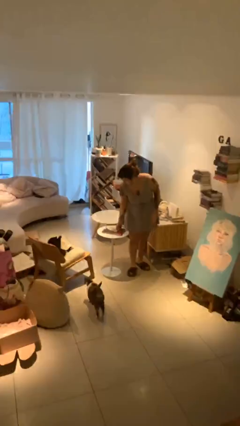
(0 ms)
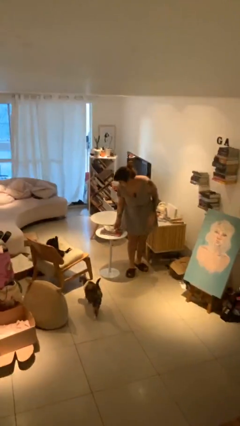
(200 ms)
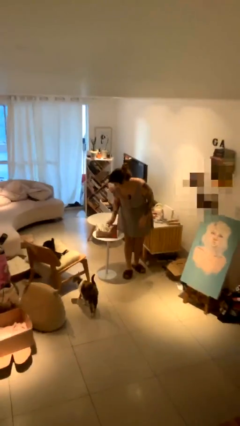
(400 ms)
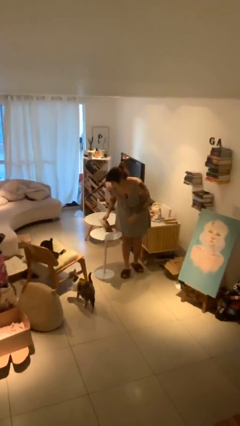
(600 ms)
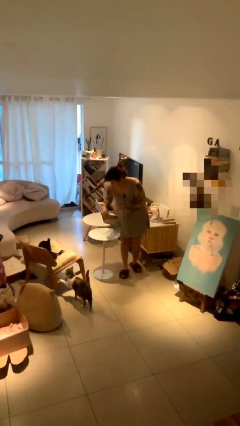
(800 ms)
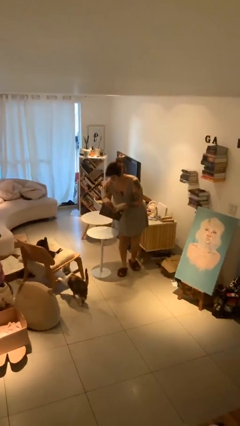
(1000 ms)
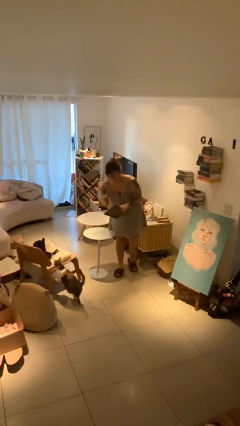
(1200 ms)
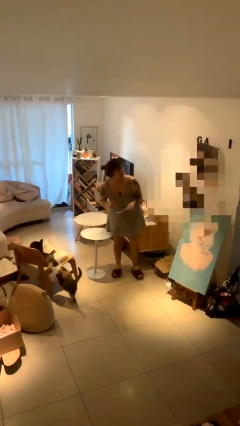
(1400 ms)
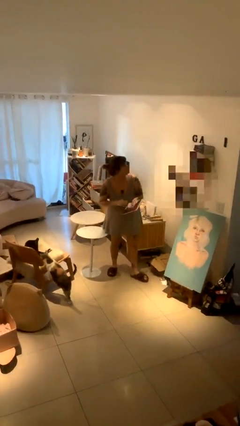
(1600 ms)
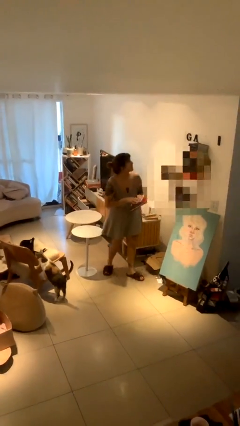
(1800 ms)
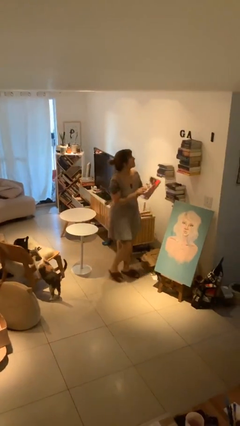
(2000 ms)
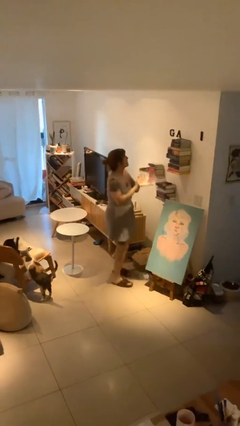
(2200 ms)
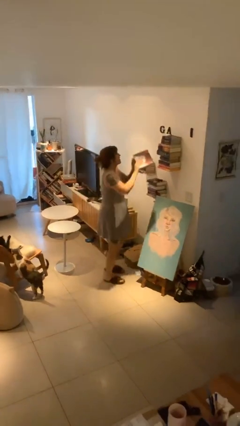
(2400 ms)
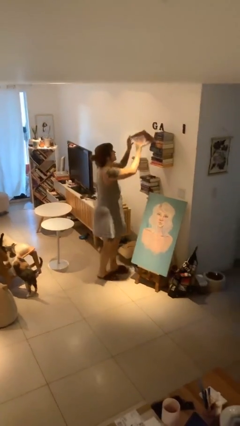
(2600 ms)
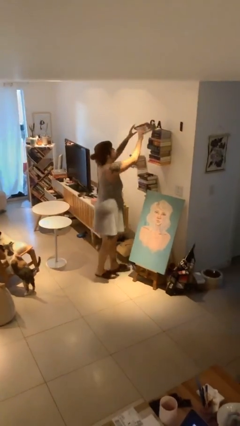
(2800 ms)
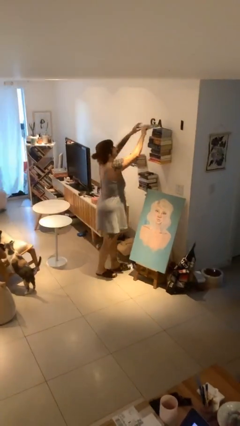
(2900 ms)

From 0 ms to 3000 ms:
person picks up object from table

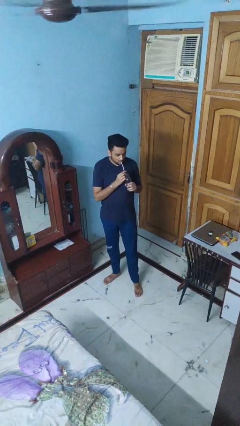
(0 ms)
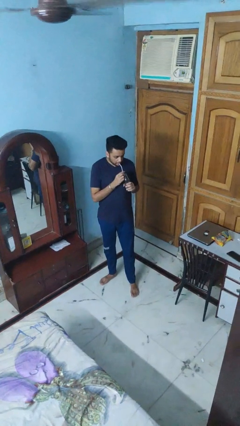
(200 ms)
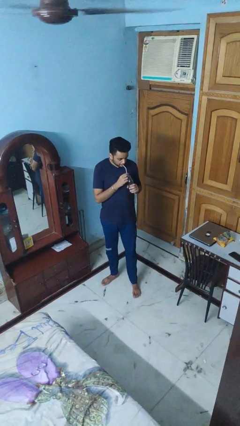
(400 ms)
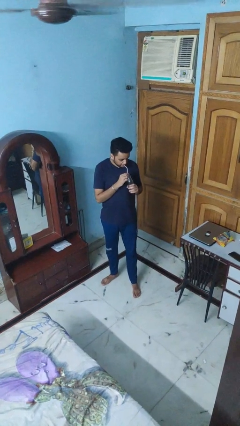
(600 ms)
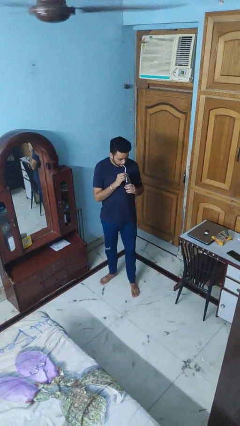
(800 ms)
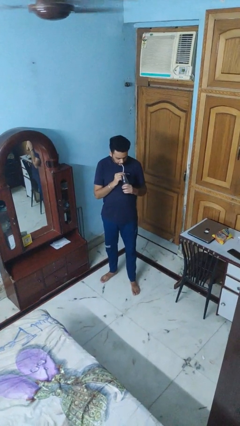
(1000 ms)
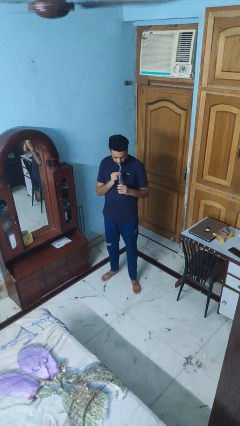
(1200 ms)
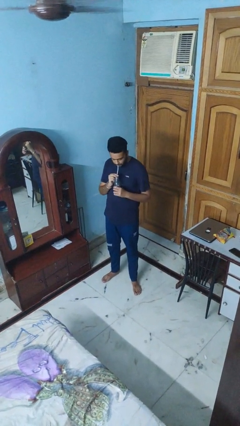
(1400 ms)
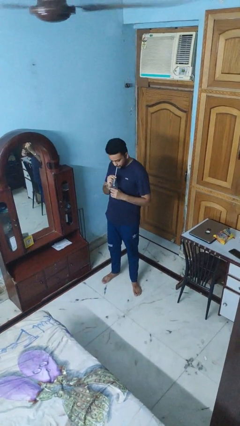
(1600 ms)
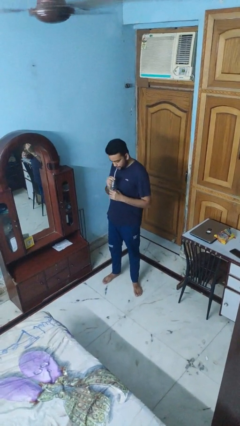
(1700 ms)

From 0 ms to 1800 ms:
person drinks from straw

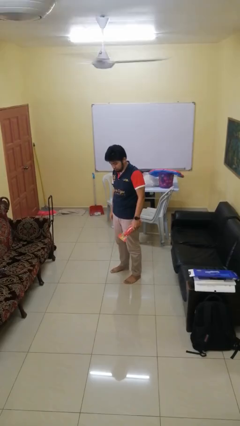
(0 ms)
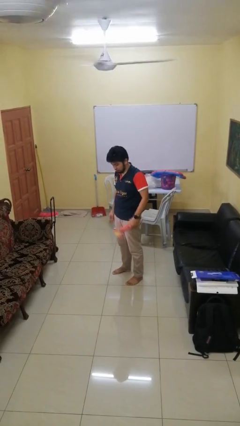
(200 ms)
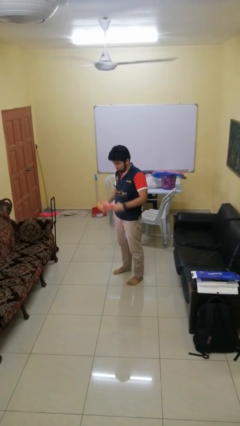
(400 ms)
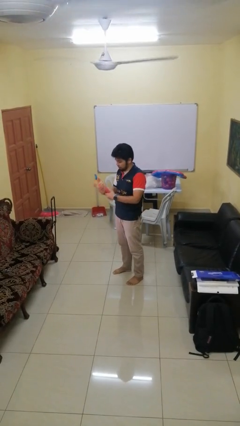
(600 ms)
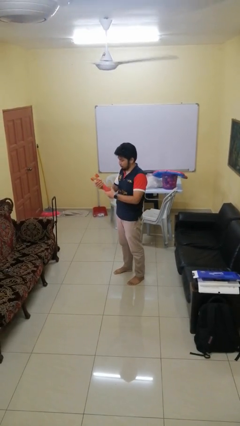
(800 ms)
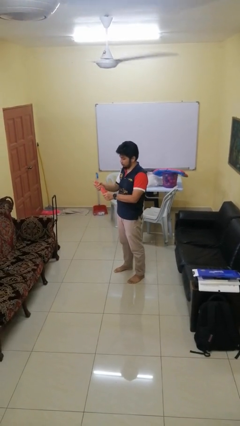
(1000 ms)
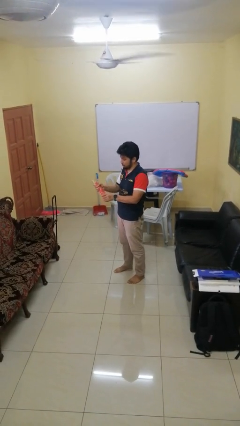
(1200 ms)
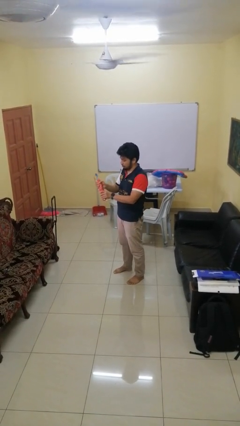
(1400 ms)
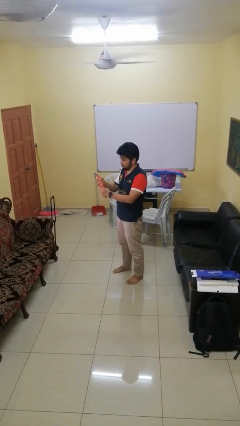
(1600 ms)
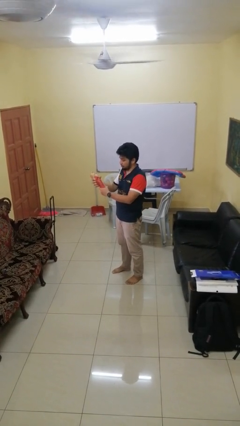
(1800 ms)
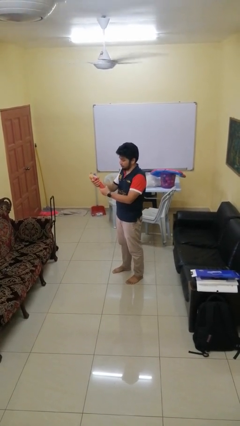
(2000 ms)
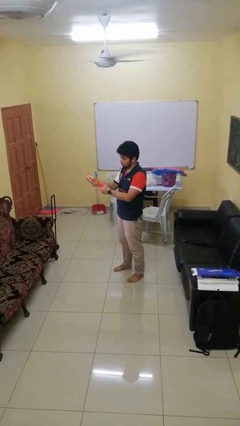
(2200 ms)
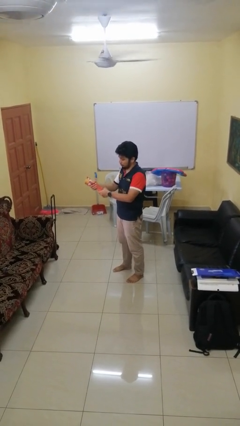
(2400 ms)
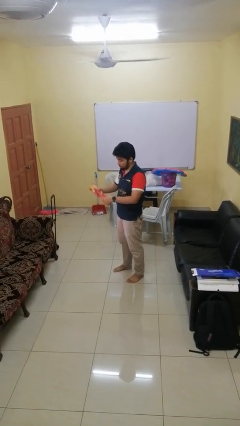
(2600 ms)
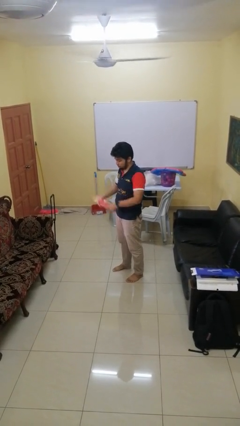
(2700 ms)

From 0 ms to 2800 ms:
person squeezes object

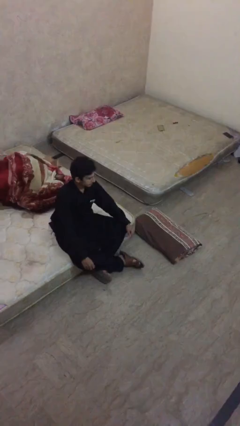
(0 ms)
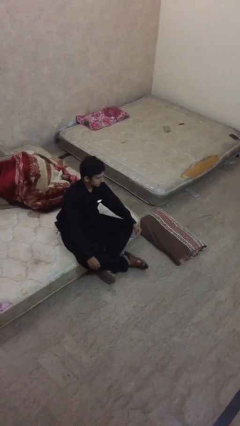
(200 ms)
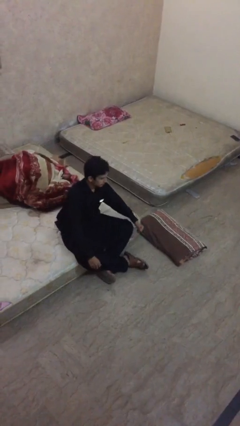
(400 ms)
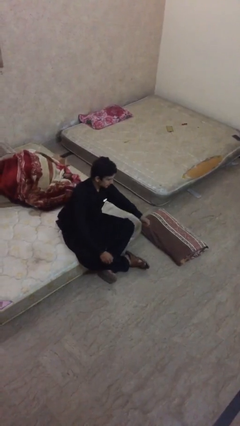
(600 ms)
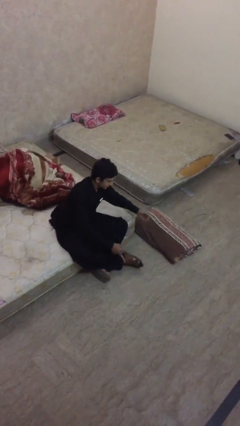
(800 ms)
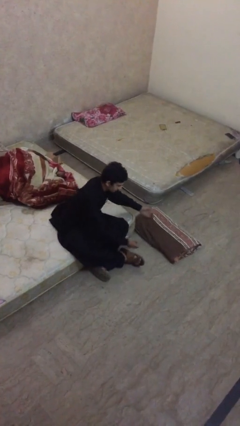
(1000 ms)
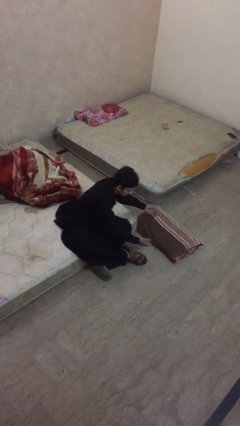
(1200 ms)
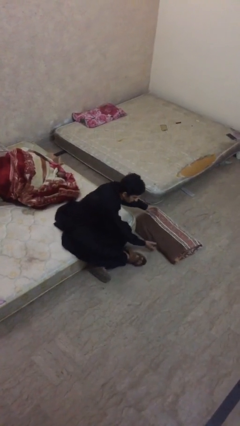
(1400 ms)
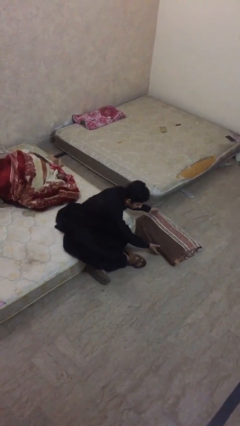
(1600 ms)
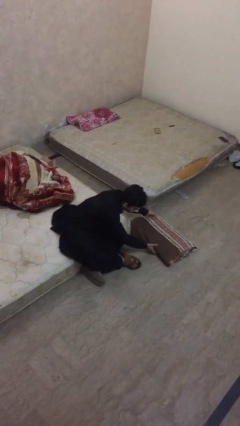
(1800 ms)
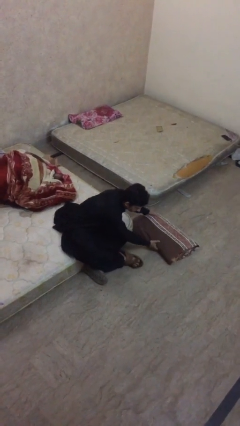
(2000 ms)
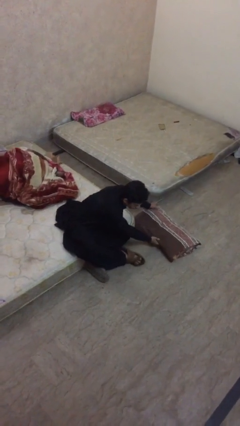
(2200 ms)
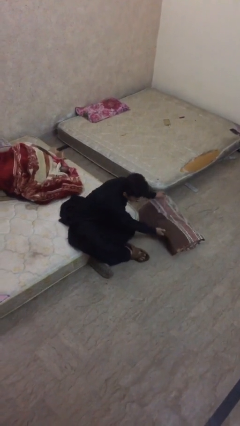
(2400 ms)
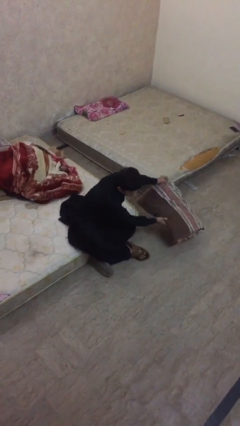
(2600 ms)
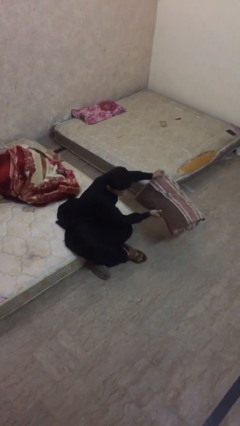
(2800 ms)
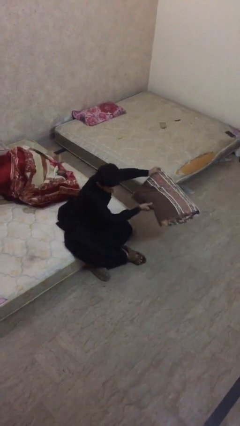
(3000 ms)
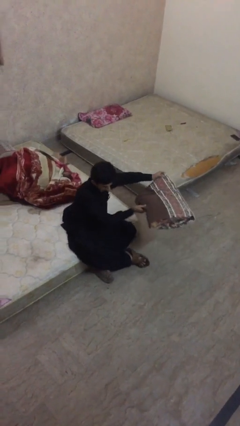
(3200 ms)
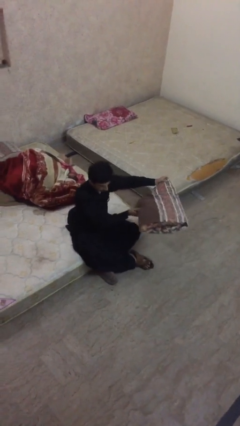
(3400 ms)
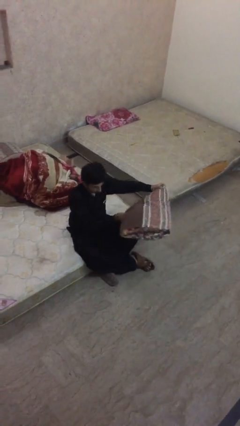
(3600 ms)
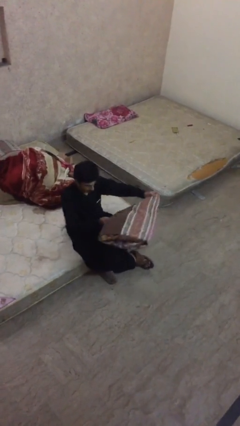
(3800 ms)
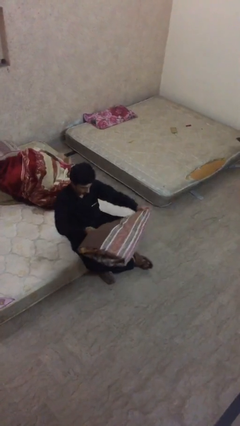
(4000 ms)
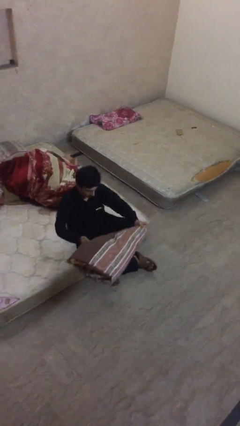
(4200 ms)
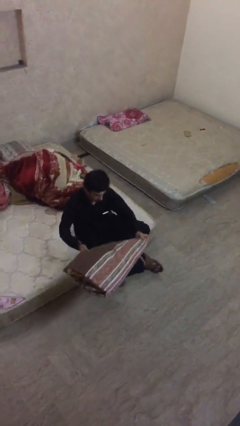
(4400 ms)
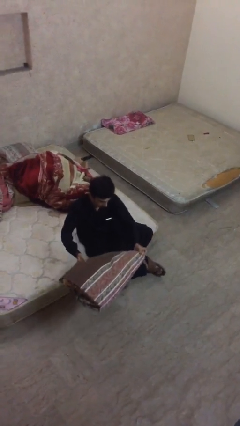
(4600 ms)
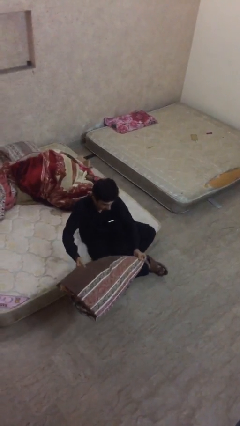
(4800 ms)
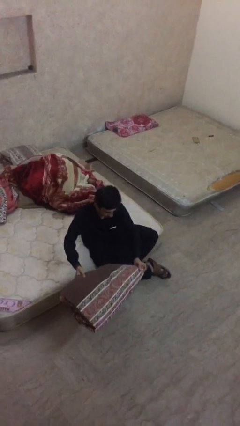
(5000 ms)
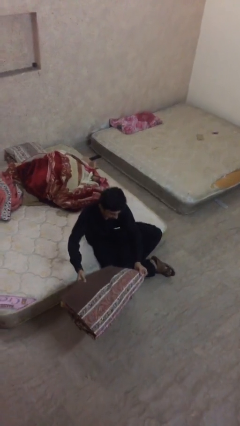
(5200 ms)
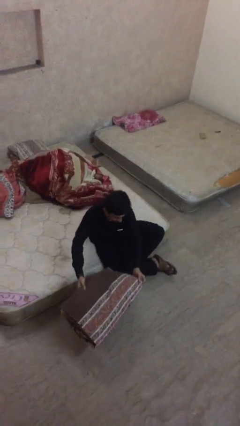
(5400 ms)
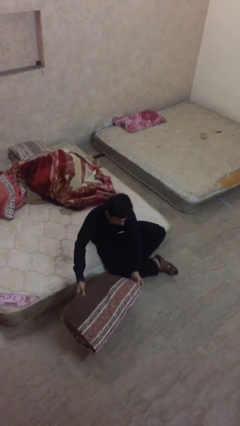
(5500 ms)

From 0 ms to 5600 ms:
person picks up object from floor

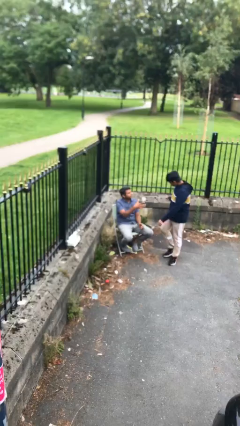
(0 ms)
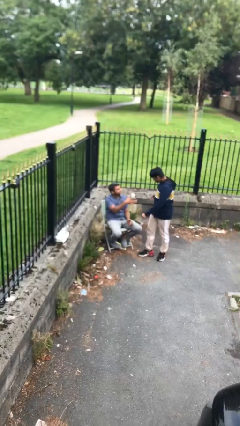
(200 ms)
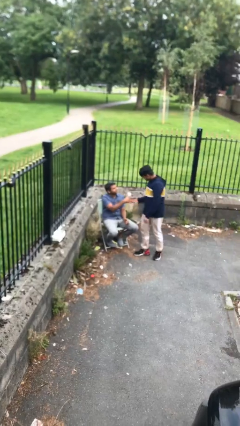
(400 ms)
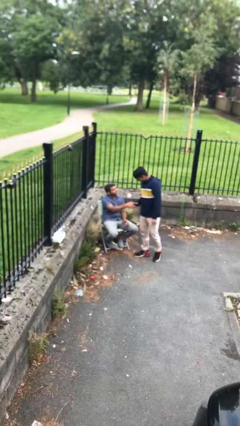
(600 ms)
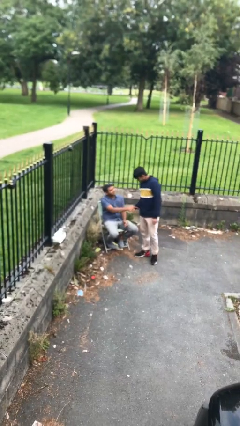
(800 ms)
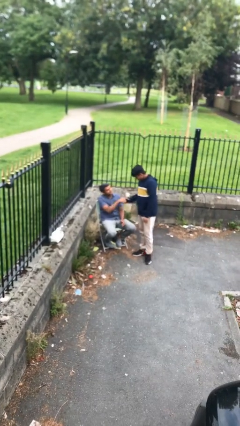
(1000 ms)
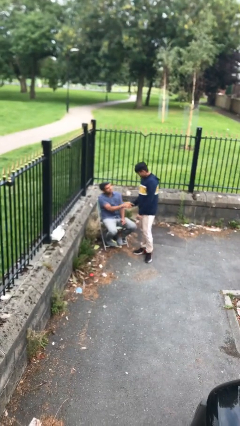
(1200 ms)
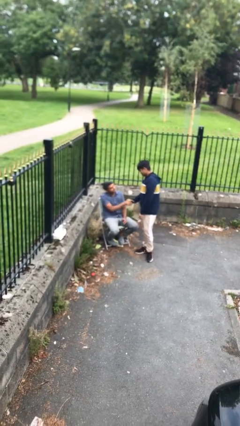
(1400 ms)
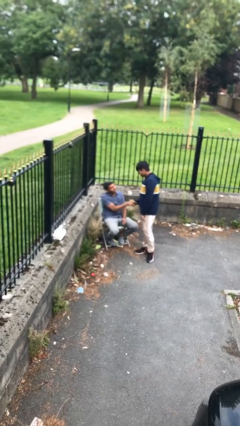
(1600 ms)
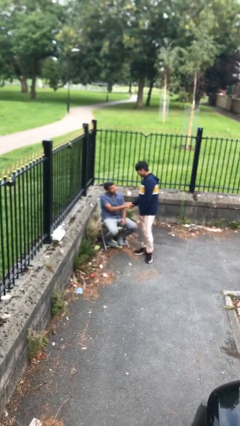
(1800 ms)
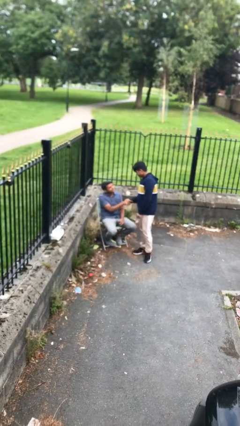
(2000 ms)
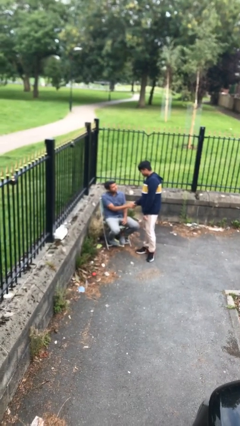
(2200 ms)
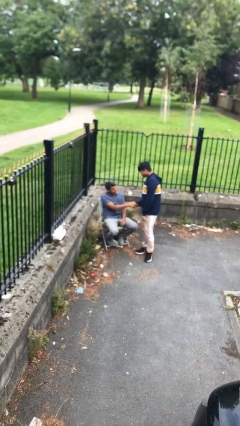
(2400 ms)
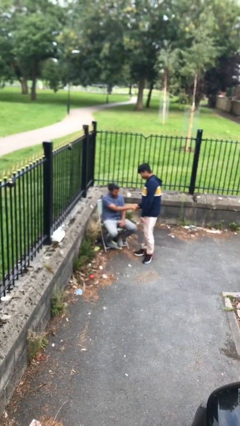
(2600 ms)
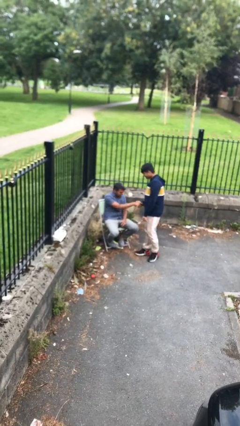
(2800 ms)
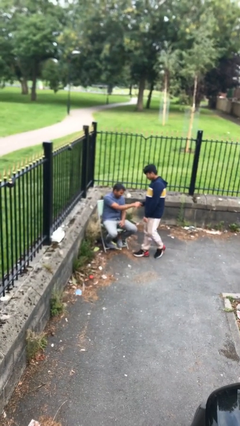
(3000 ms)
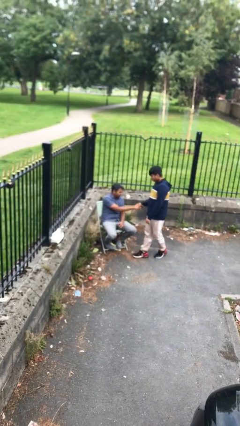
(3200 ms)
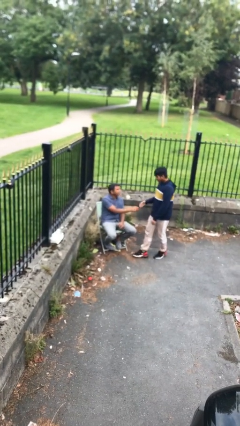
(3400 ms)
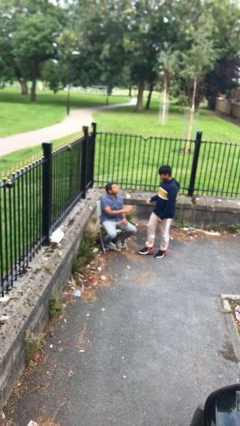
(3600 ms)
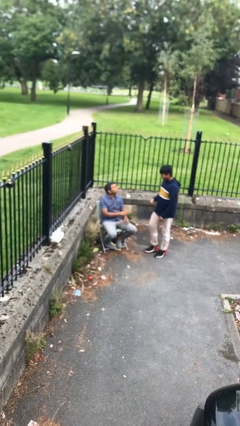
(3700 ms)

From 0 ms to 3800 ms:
person shakes hand

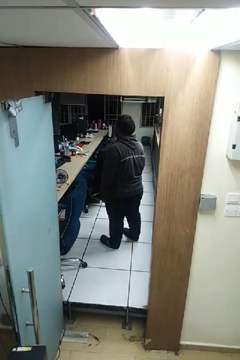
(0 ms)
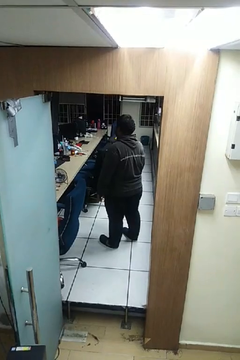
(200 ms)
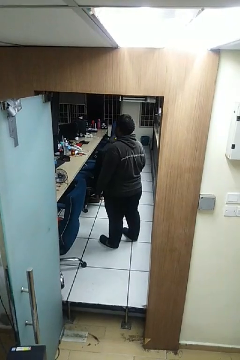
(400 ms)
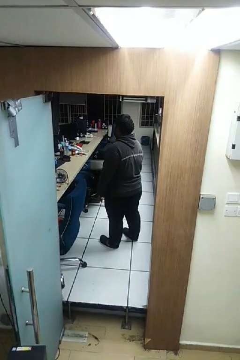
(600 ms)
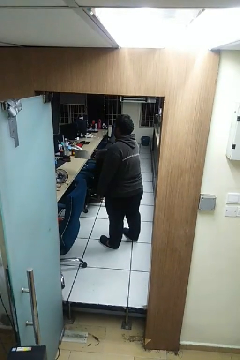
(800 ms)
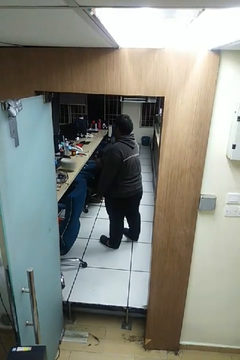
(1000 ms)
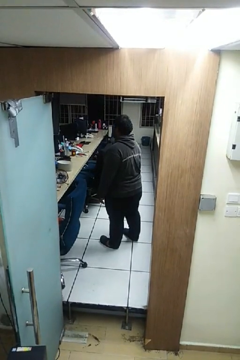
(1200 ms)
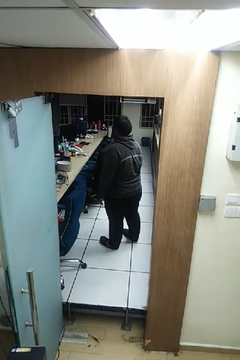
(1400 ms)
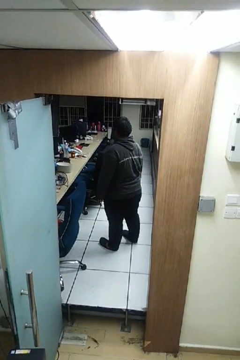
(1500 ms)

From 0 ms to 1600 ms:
person throws object on table
